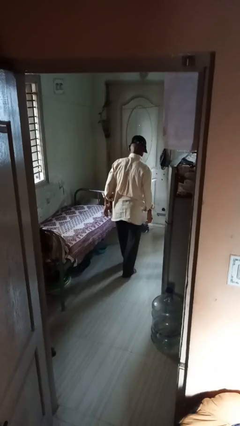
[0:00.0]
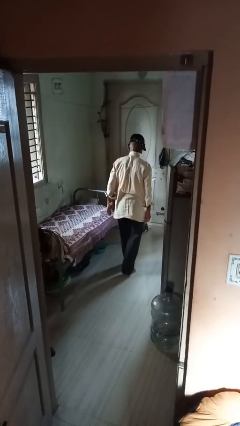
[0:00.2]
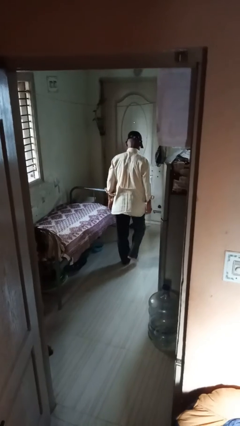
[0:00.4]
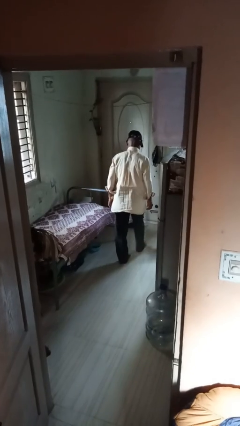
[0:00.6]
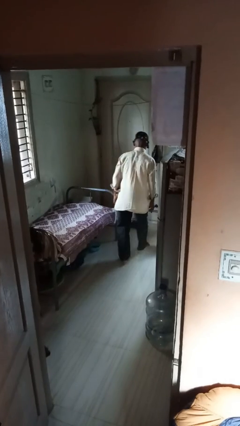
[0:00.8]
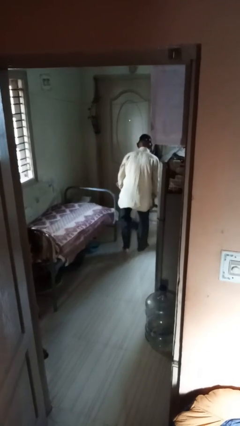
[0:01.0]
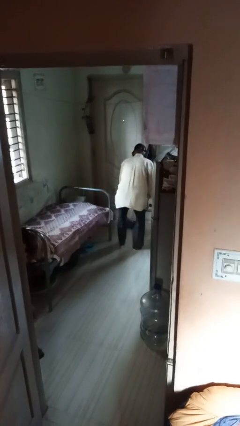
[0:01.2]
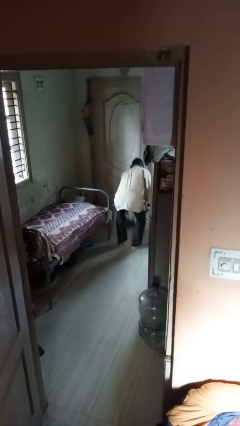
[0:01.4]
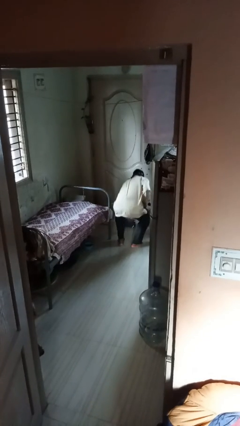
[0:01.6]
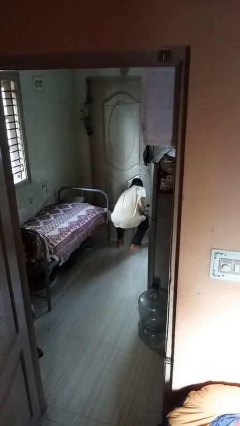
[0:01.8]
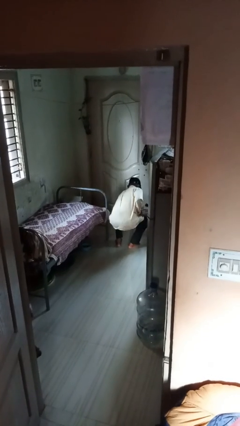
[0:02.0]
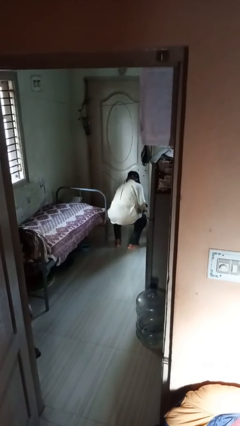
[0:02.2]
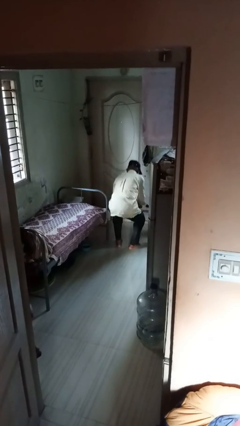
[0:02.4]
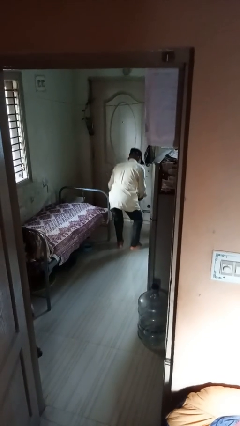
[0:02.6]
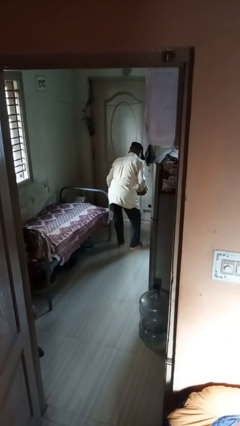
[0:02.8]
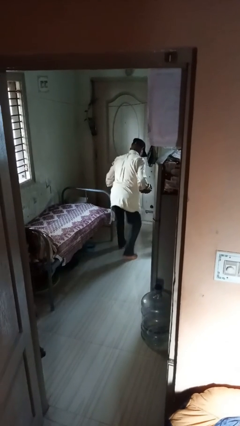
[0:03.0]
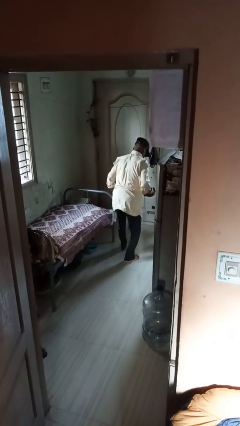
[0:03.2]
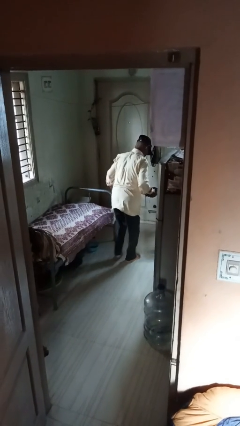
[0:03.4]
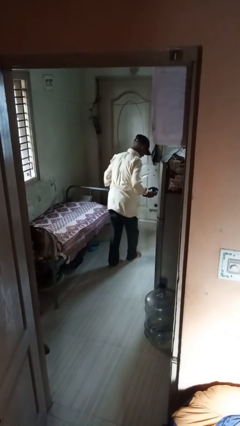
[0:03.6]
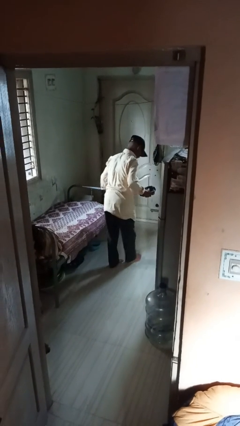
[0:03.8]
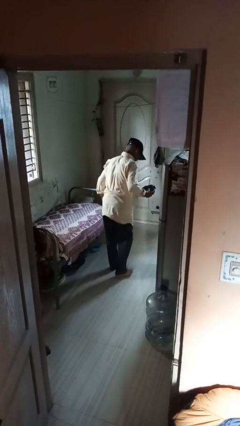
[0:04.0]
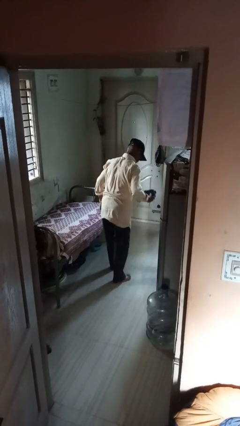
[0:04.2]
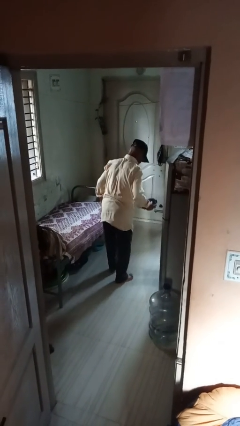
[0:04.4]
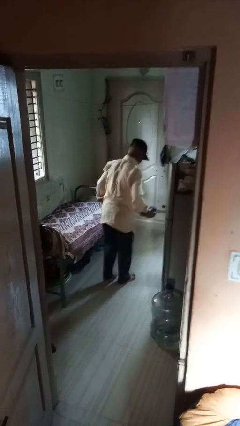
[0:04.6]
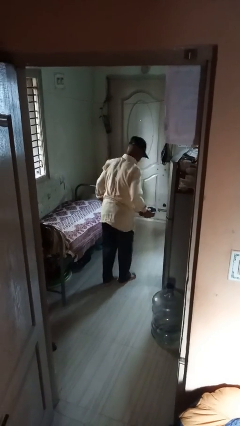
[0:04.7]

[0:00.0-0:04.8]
person picks up object from floor

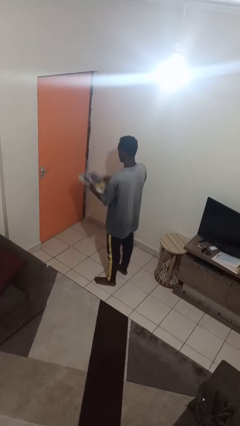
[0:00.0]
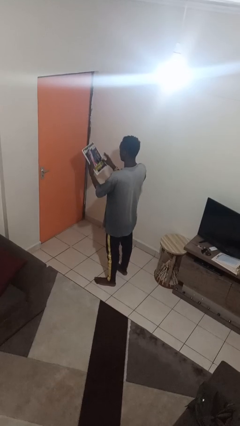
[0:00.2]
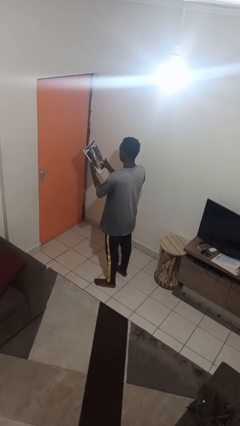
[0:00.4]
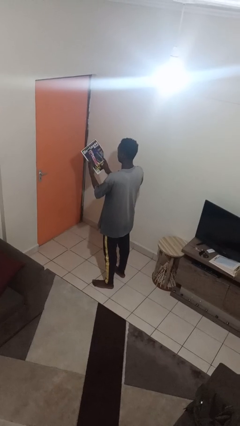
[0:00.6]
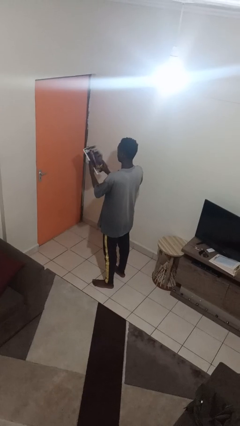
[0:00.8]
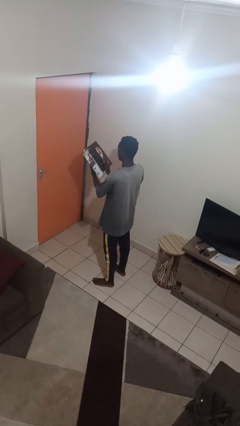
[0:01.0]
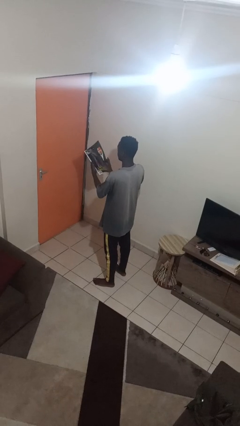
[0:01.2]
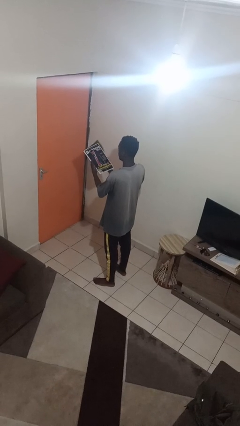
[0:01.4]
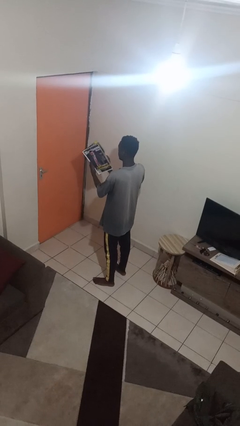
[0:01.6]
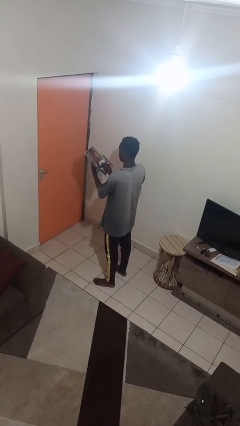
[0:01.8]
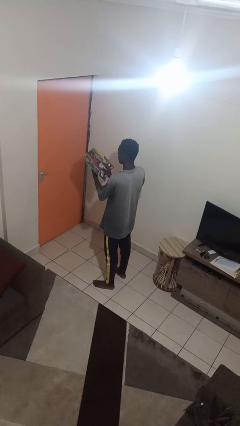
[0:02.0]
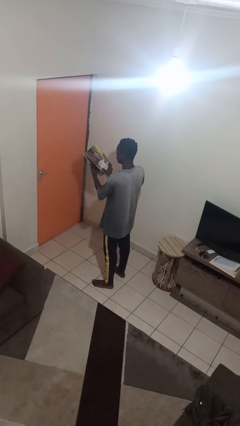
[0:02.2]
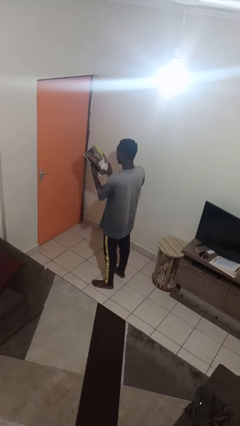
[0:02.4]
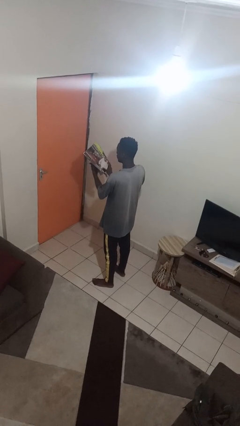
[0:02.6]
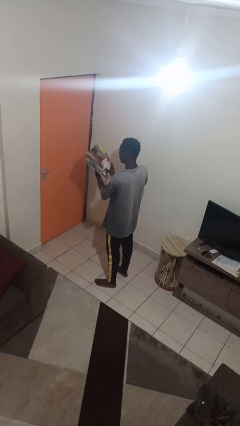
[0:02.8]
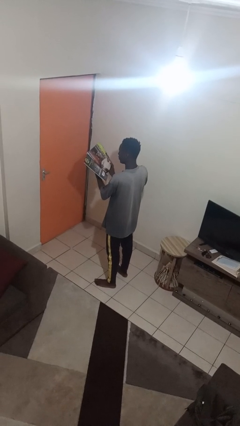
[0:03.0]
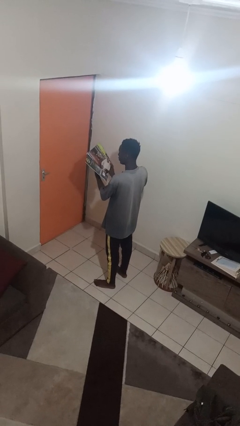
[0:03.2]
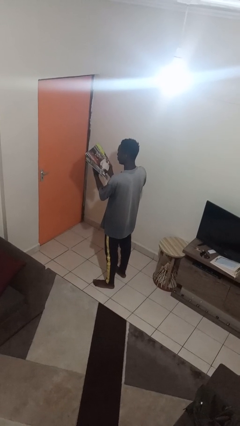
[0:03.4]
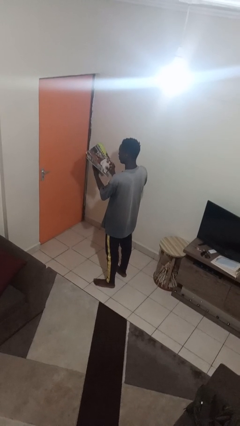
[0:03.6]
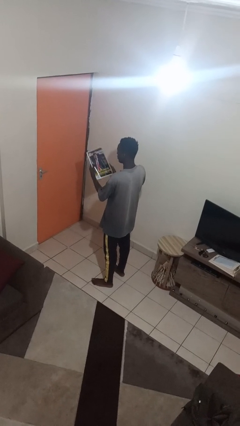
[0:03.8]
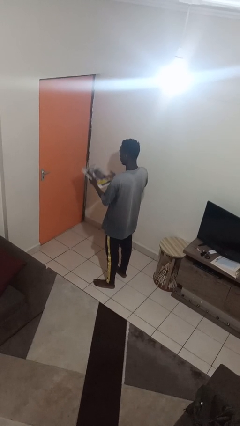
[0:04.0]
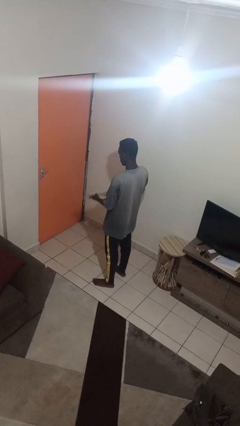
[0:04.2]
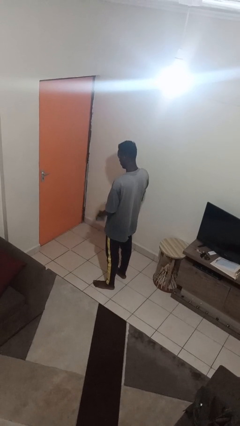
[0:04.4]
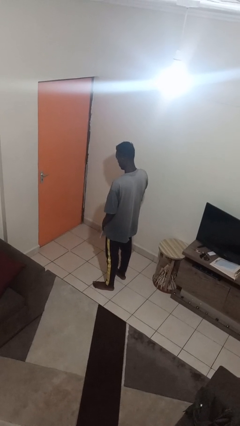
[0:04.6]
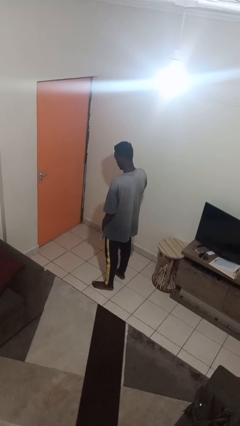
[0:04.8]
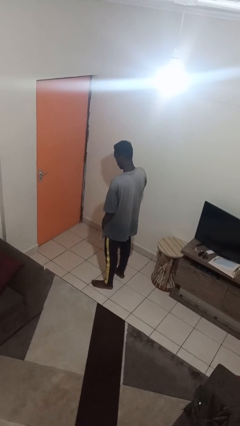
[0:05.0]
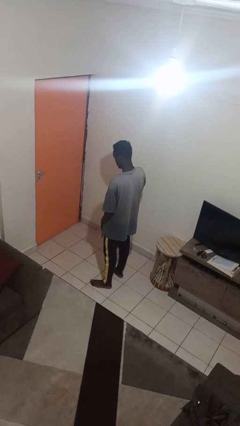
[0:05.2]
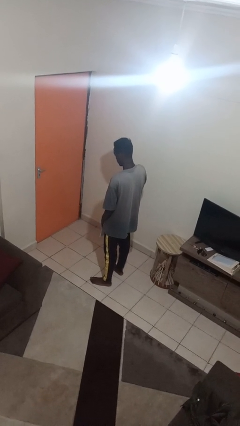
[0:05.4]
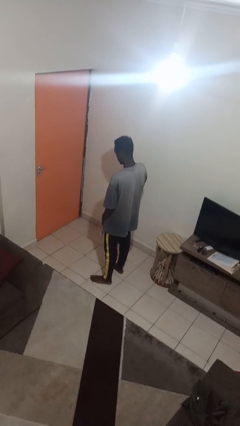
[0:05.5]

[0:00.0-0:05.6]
person reads magazine

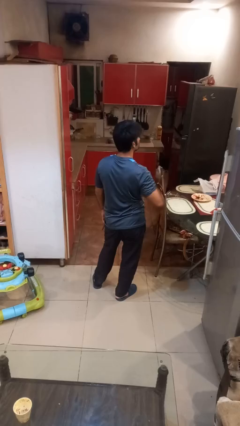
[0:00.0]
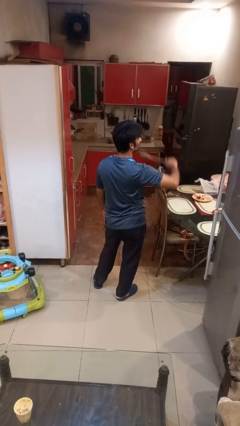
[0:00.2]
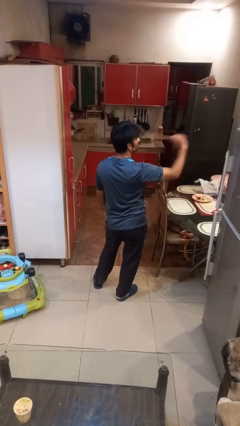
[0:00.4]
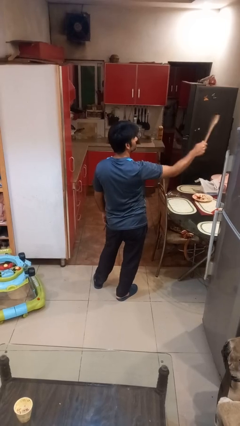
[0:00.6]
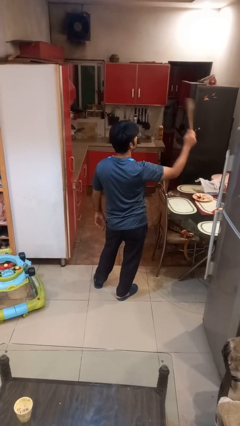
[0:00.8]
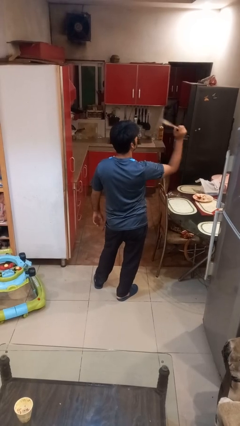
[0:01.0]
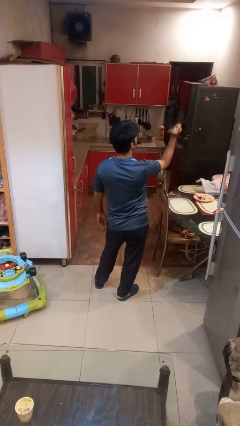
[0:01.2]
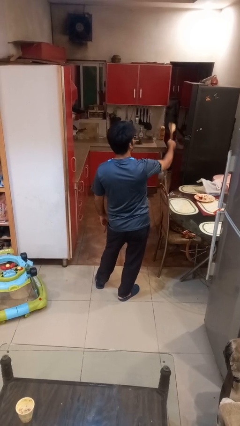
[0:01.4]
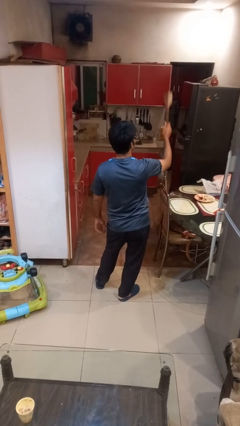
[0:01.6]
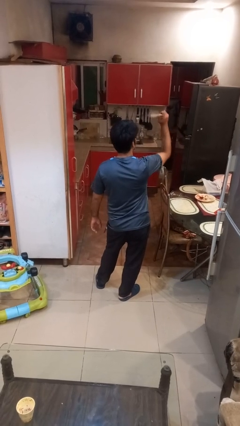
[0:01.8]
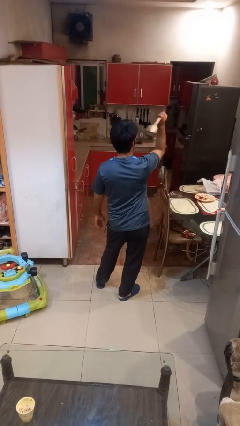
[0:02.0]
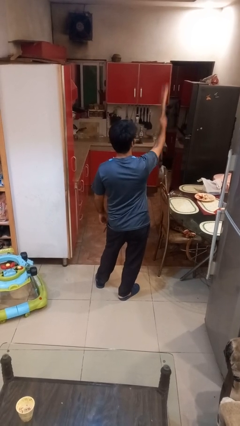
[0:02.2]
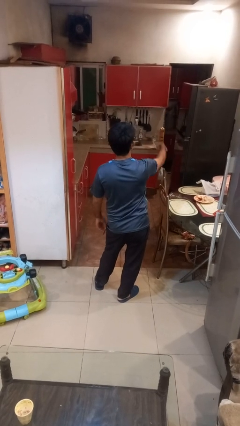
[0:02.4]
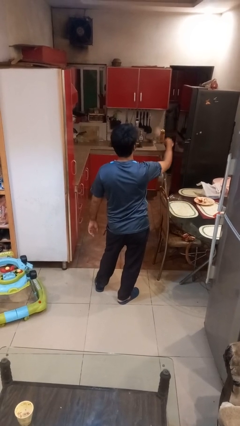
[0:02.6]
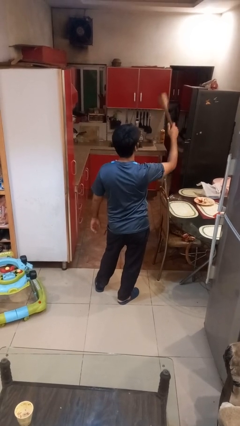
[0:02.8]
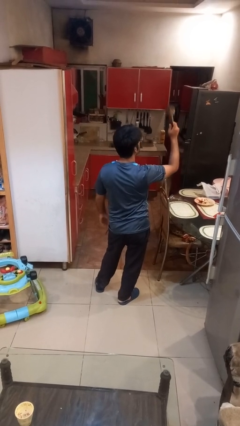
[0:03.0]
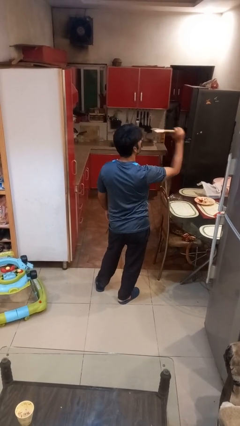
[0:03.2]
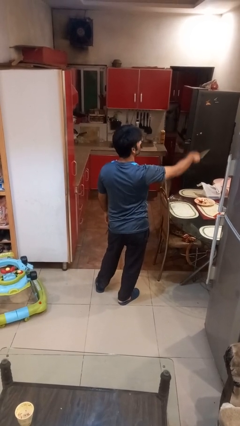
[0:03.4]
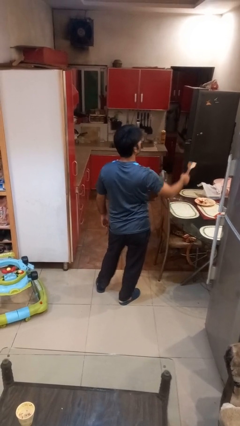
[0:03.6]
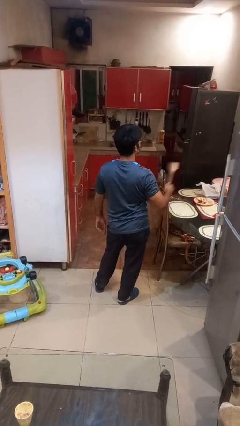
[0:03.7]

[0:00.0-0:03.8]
person swats bug

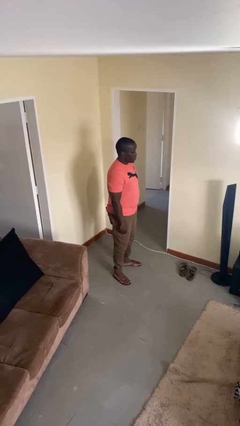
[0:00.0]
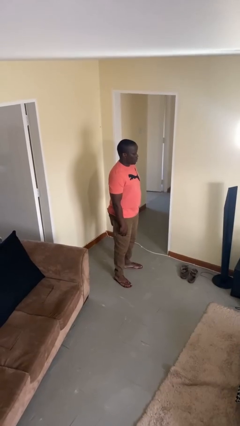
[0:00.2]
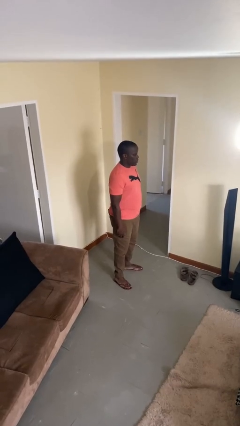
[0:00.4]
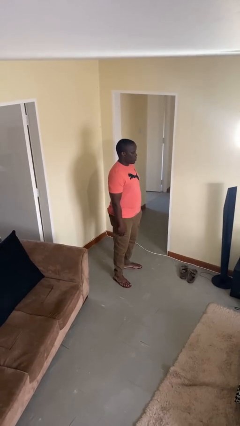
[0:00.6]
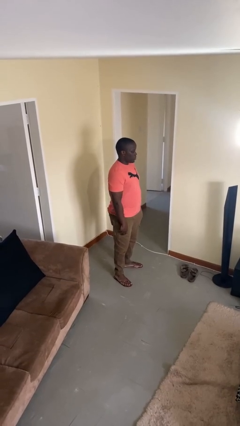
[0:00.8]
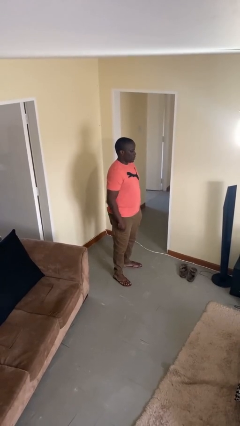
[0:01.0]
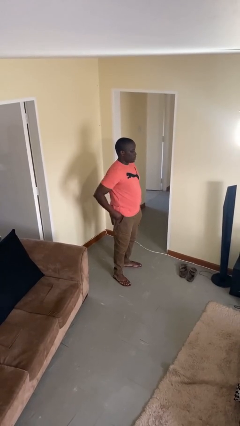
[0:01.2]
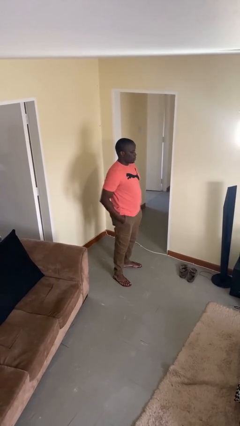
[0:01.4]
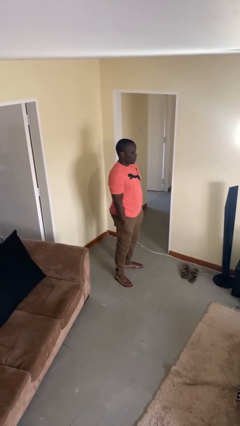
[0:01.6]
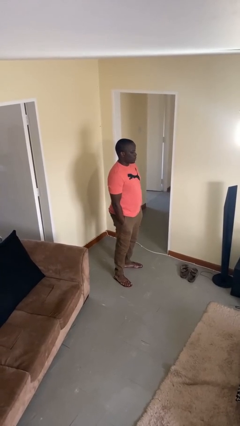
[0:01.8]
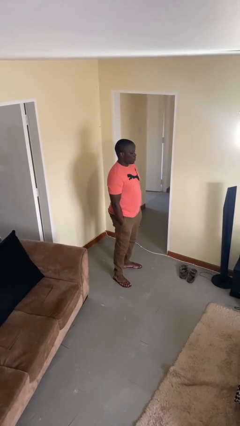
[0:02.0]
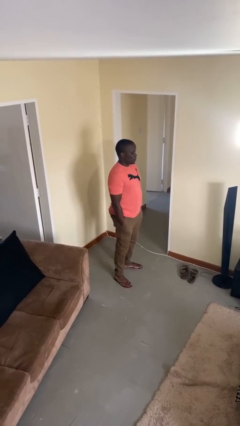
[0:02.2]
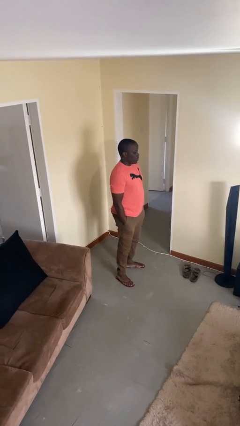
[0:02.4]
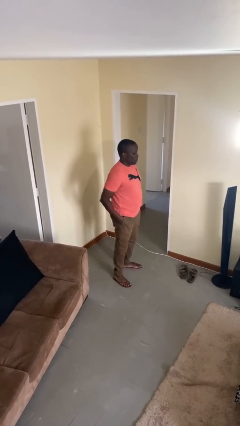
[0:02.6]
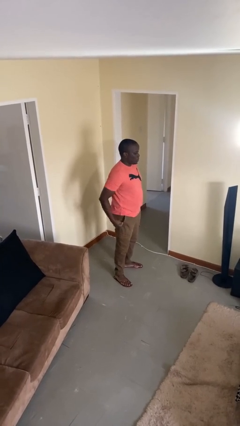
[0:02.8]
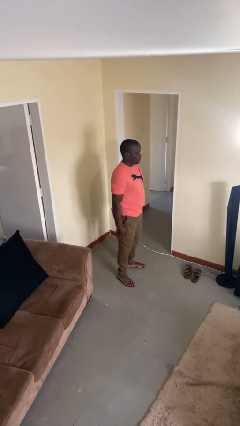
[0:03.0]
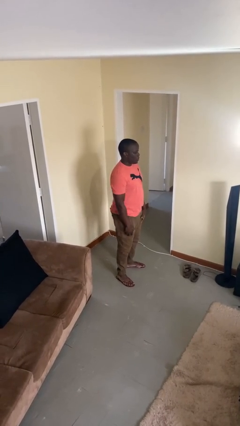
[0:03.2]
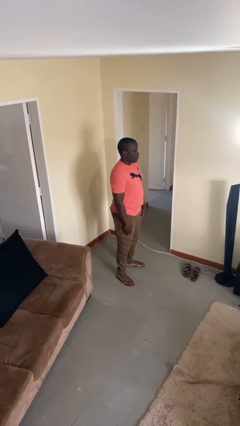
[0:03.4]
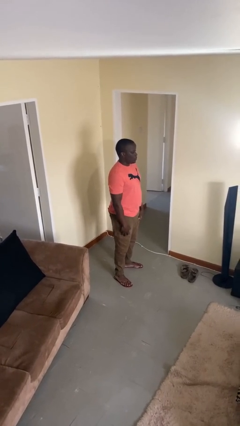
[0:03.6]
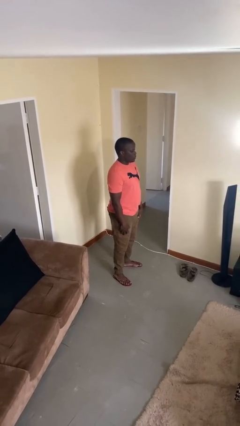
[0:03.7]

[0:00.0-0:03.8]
person puts hands in back pockets

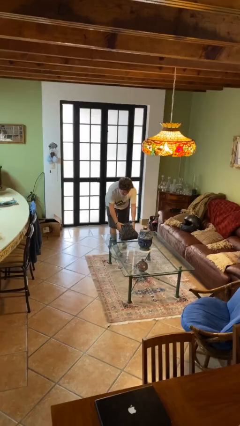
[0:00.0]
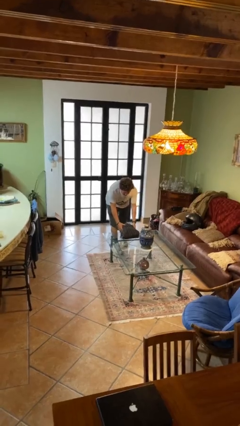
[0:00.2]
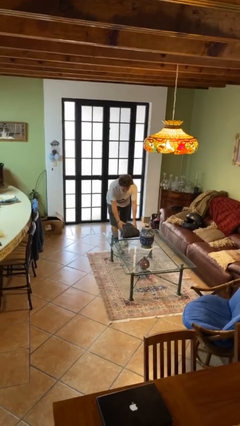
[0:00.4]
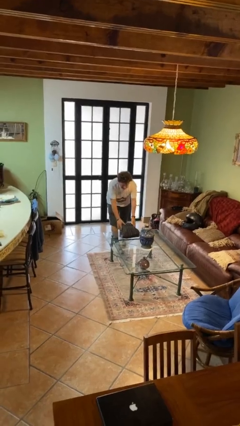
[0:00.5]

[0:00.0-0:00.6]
person puts down object on table
